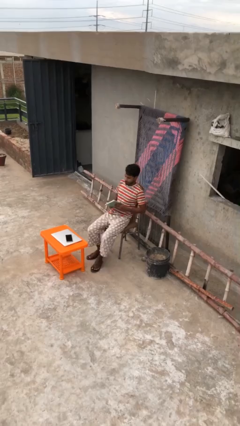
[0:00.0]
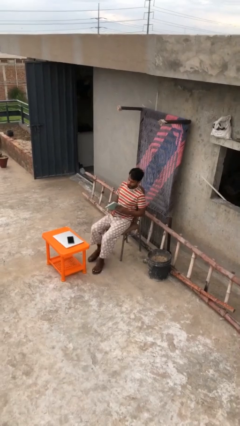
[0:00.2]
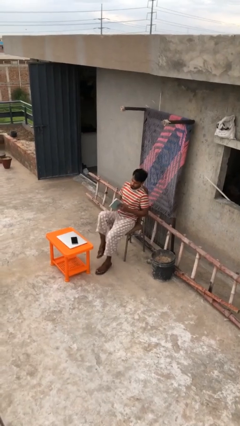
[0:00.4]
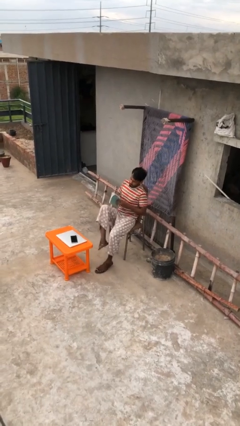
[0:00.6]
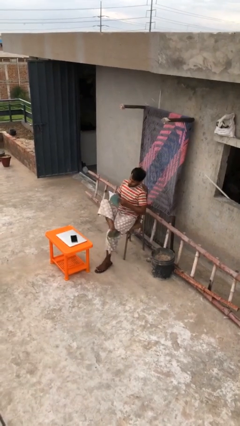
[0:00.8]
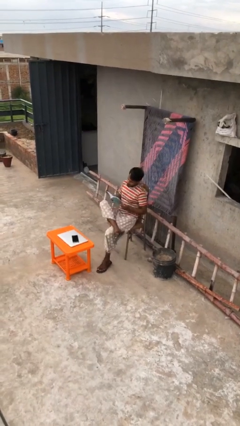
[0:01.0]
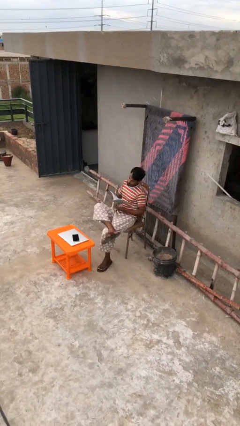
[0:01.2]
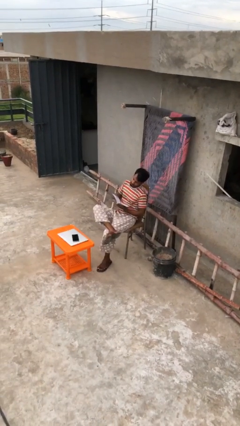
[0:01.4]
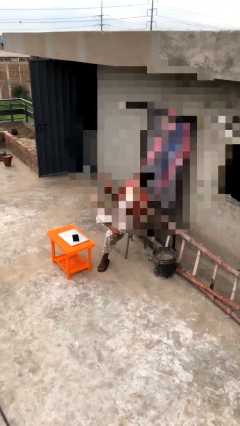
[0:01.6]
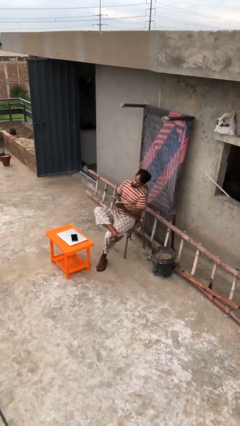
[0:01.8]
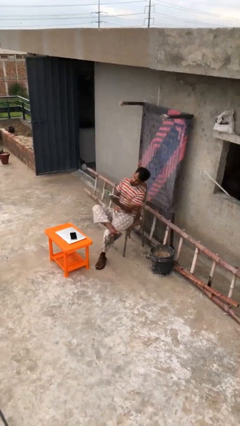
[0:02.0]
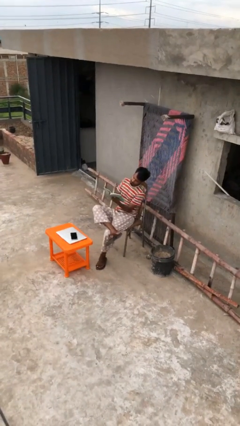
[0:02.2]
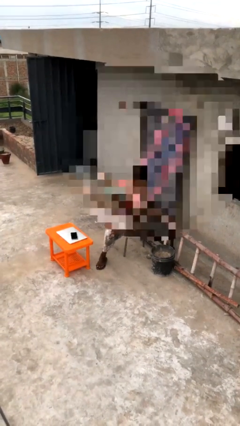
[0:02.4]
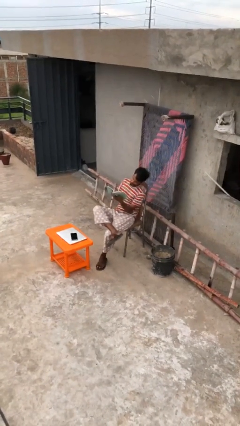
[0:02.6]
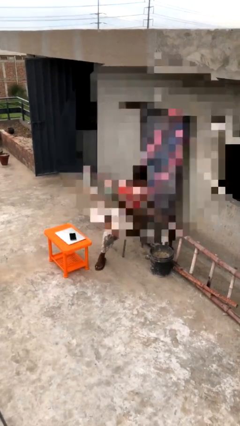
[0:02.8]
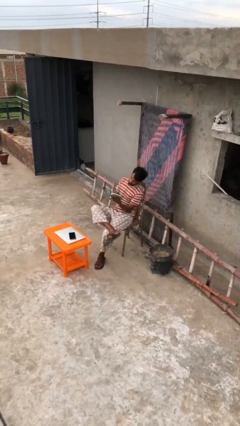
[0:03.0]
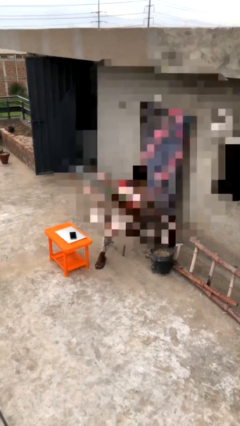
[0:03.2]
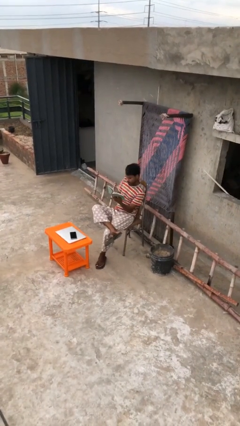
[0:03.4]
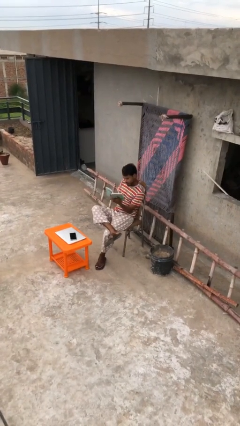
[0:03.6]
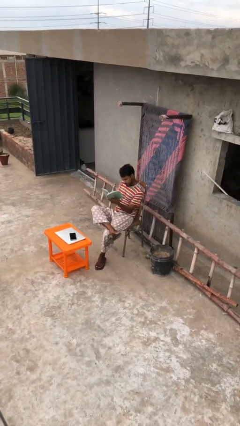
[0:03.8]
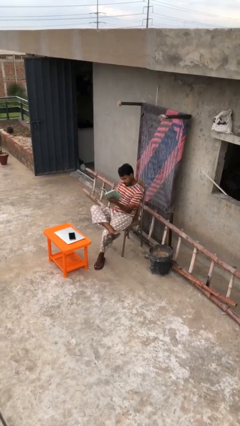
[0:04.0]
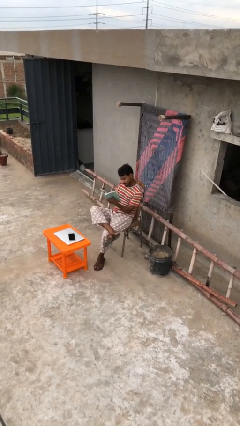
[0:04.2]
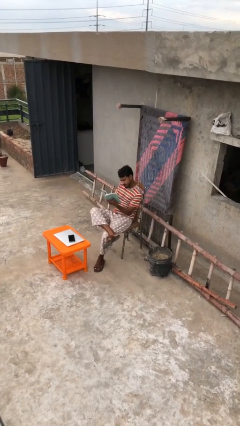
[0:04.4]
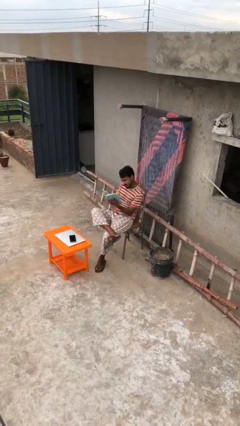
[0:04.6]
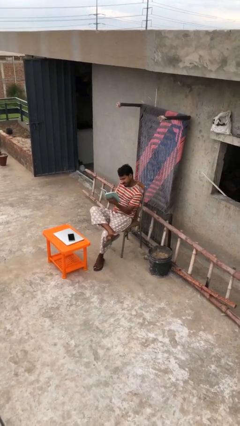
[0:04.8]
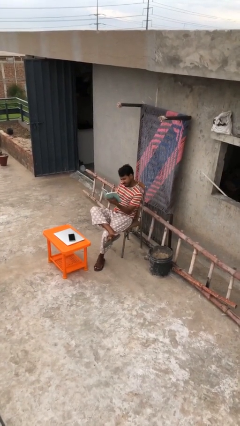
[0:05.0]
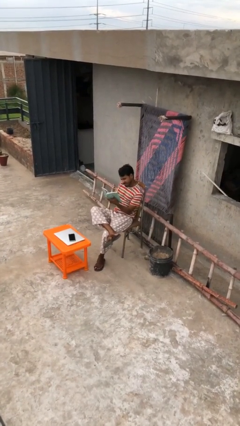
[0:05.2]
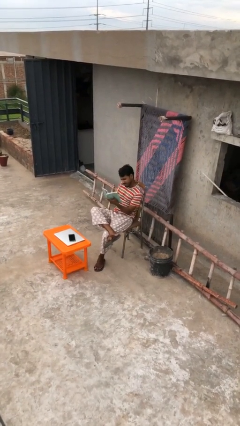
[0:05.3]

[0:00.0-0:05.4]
person reads document

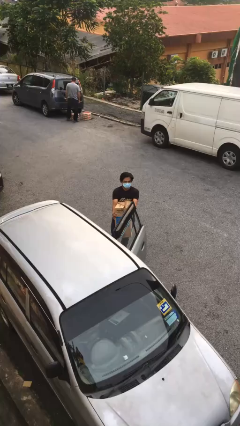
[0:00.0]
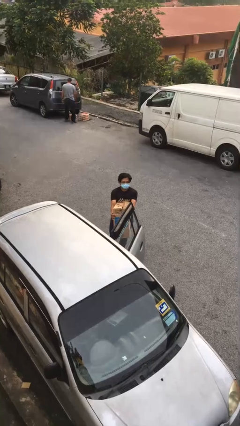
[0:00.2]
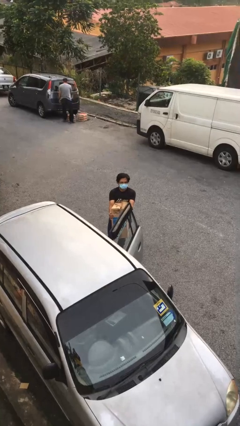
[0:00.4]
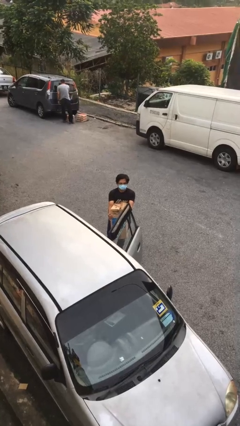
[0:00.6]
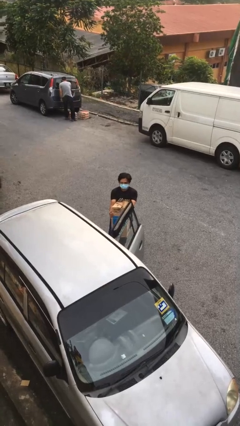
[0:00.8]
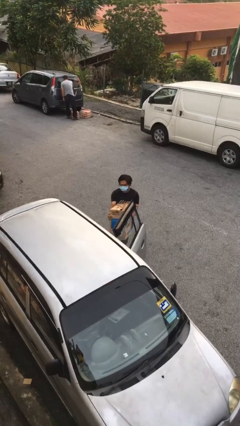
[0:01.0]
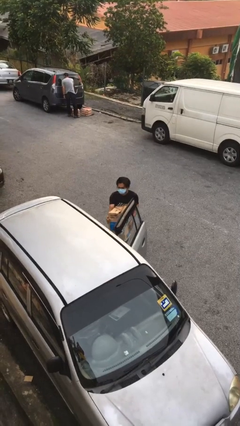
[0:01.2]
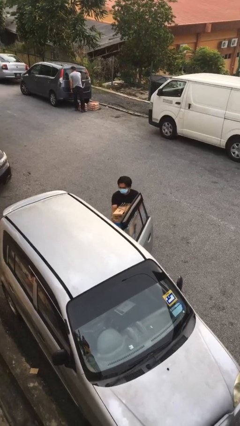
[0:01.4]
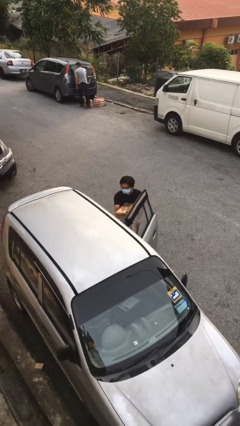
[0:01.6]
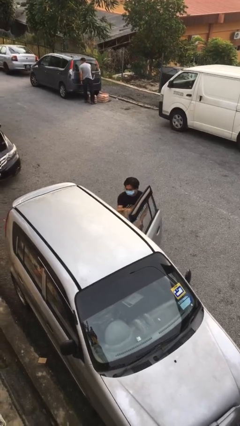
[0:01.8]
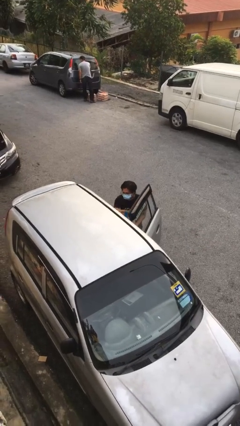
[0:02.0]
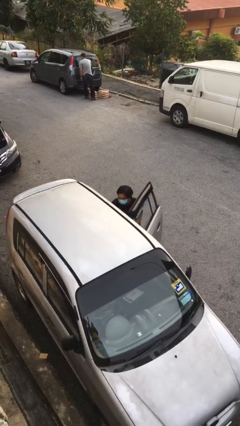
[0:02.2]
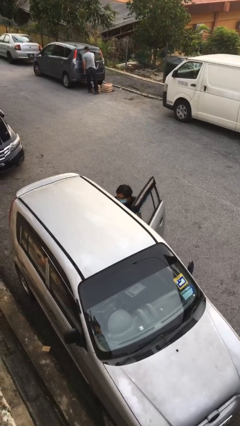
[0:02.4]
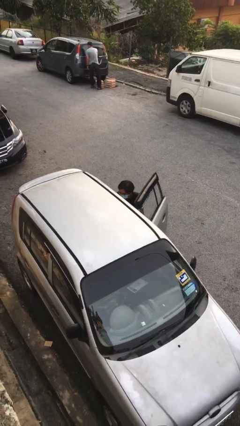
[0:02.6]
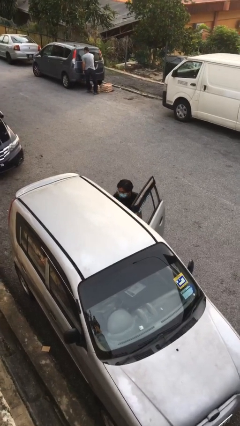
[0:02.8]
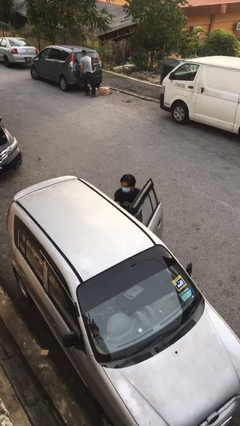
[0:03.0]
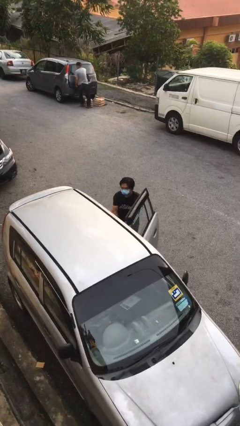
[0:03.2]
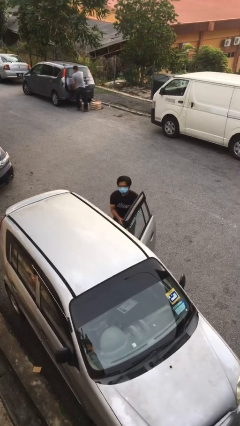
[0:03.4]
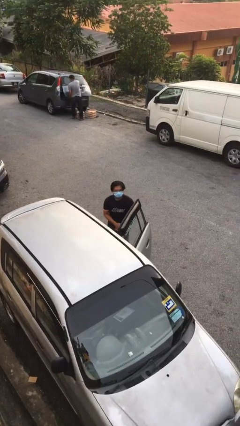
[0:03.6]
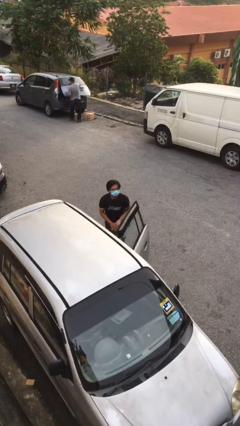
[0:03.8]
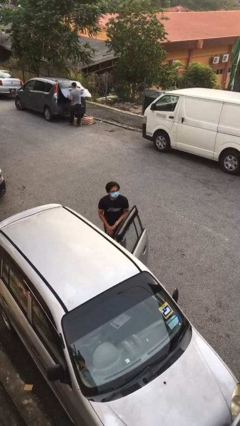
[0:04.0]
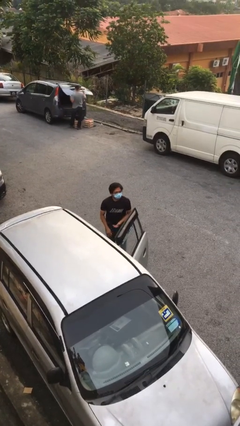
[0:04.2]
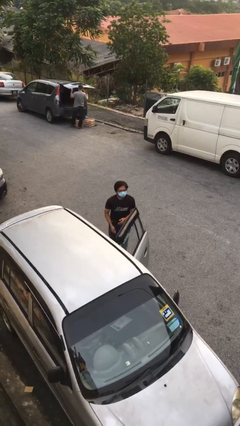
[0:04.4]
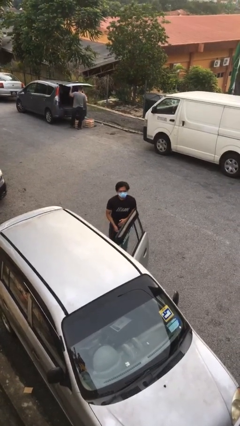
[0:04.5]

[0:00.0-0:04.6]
person loads car

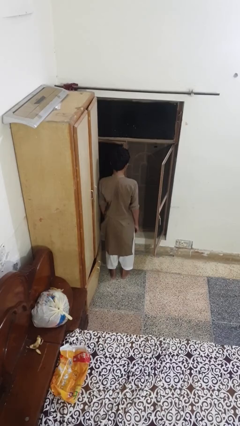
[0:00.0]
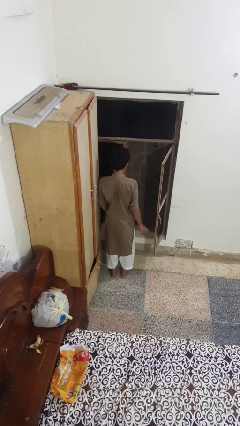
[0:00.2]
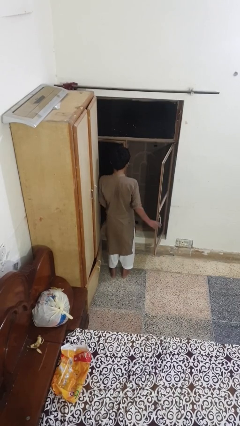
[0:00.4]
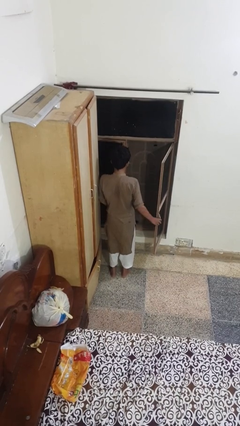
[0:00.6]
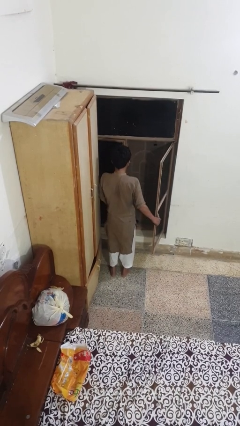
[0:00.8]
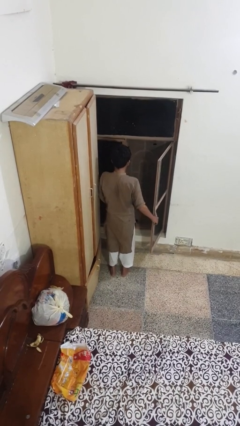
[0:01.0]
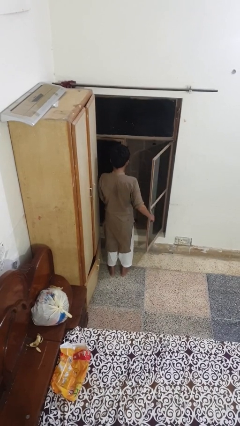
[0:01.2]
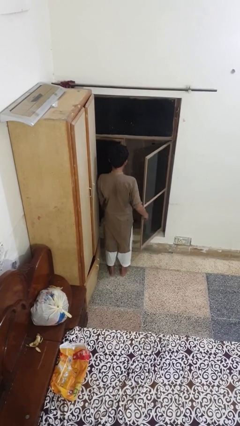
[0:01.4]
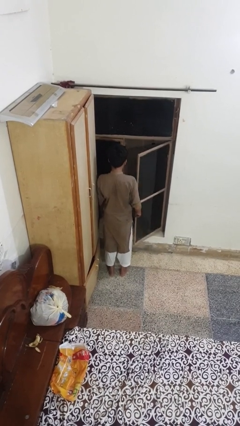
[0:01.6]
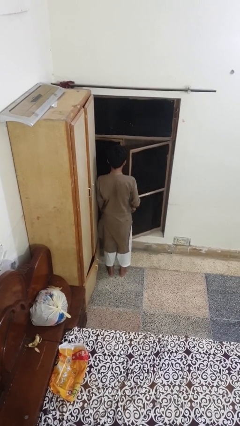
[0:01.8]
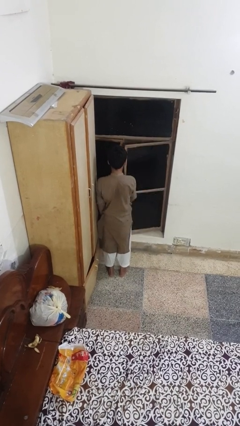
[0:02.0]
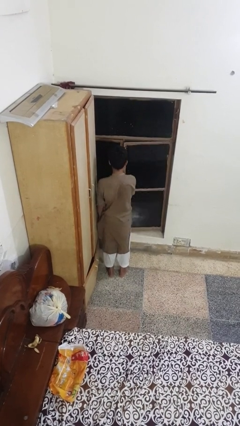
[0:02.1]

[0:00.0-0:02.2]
person closes home window

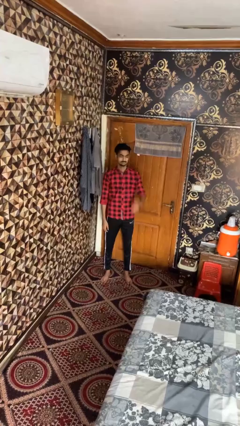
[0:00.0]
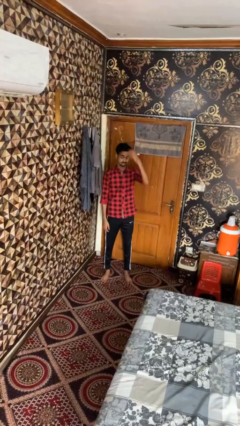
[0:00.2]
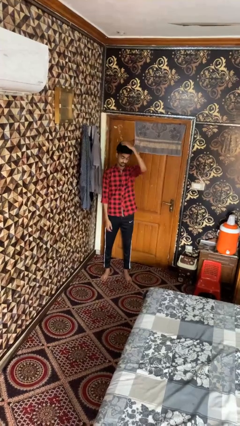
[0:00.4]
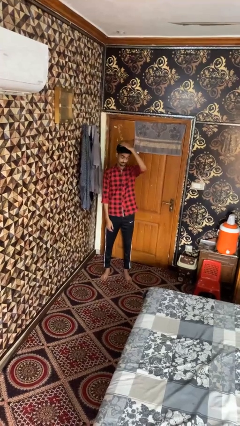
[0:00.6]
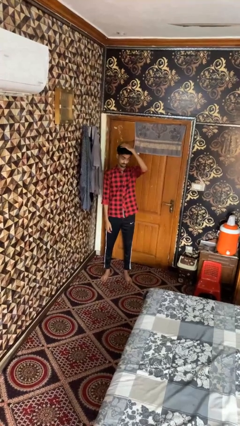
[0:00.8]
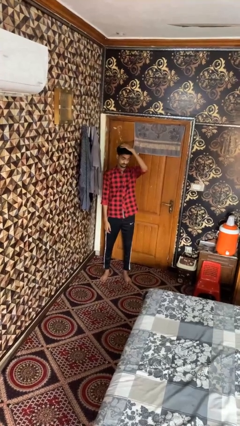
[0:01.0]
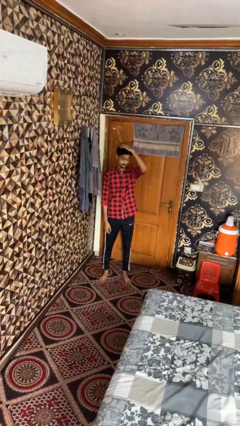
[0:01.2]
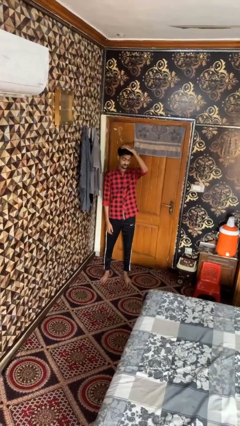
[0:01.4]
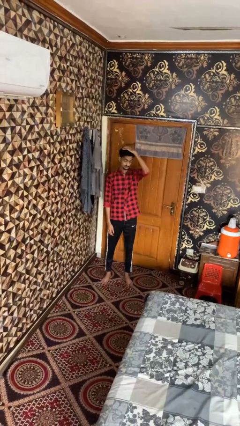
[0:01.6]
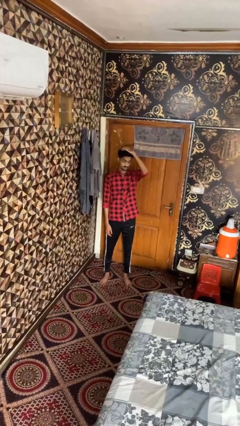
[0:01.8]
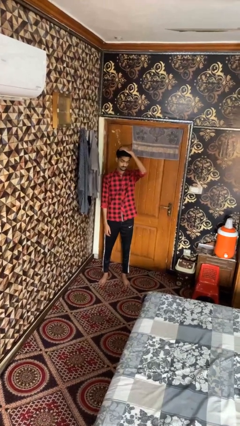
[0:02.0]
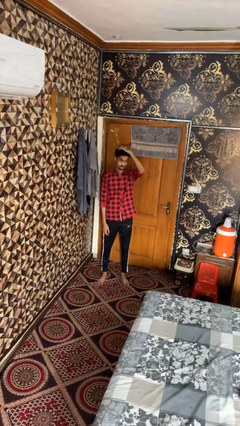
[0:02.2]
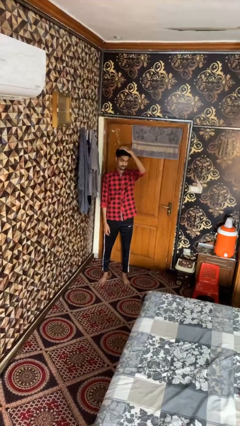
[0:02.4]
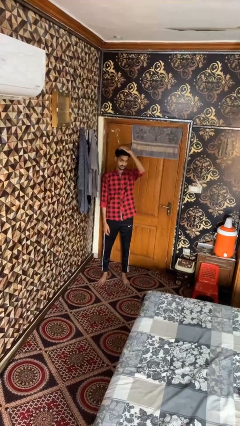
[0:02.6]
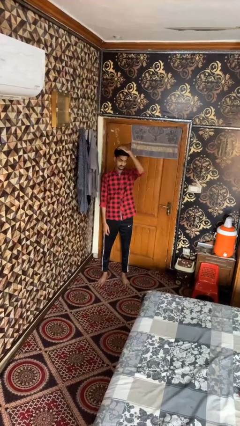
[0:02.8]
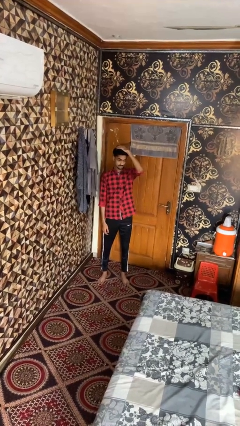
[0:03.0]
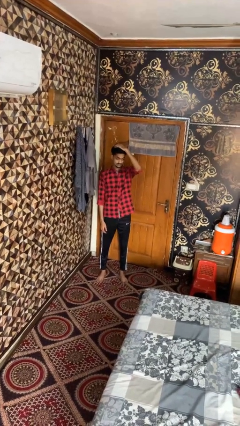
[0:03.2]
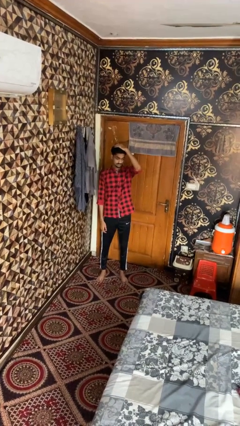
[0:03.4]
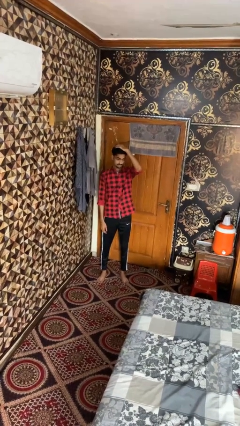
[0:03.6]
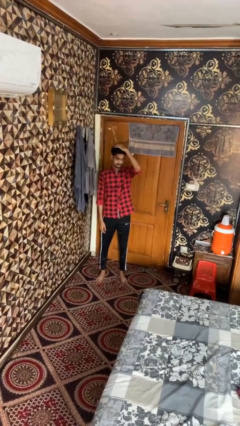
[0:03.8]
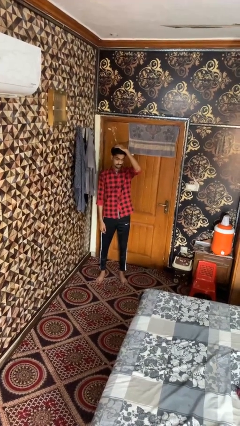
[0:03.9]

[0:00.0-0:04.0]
person pats head

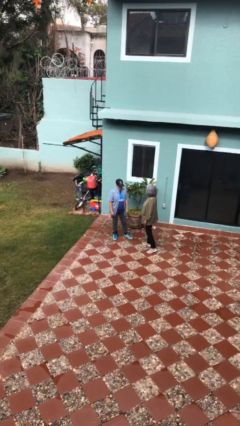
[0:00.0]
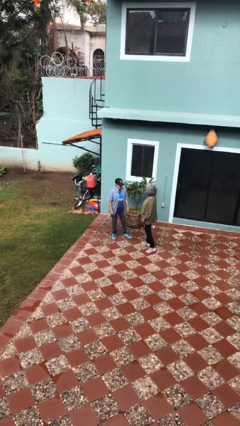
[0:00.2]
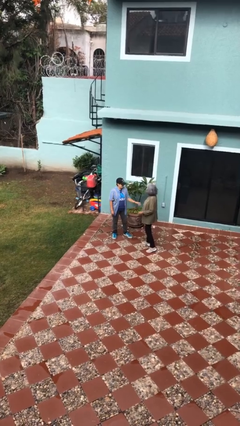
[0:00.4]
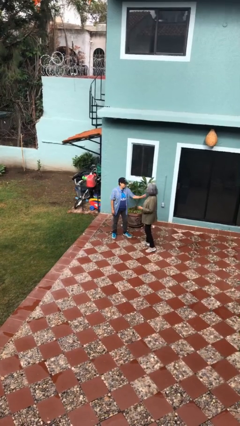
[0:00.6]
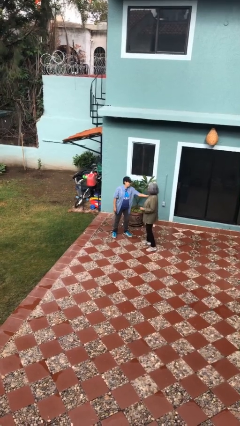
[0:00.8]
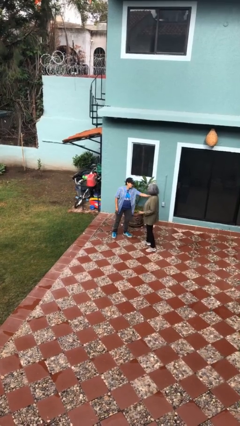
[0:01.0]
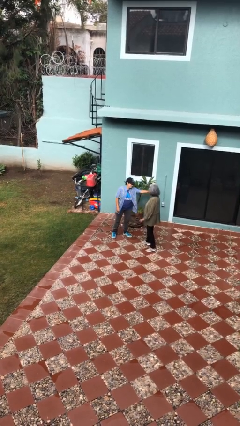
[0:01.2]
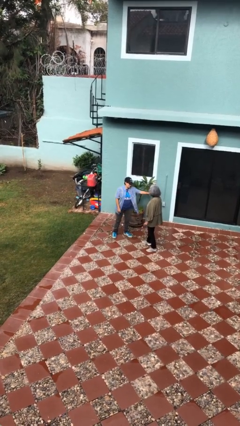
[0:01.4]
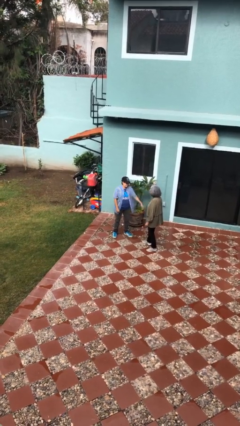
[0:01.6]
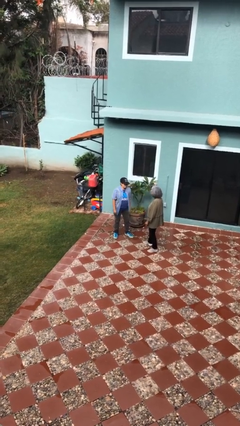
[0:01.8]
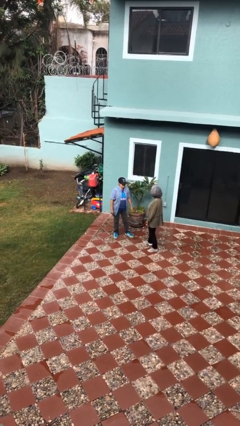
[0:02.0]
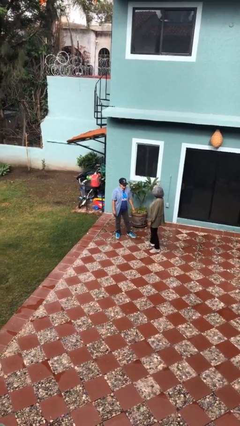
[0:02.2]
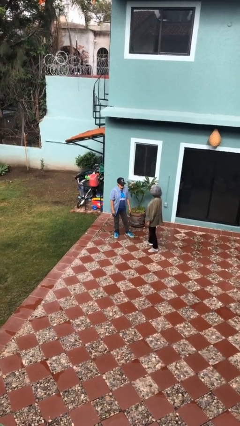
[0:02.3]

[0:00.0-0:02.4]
person shoves person
